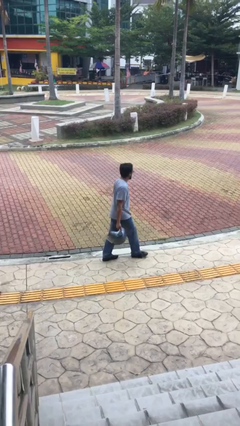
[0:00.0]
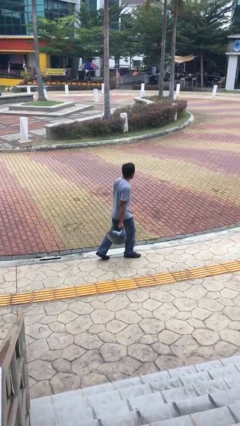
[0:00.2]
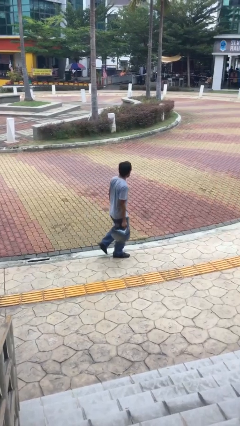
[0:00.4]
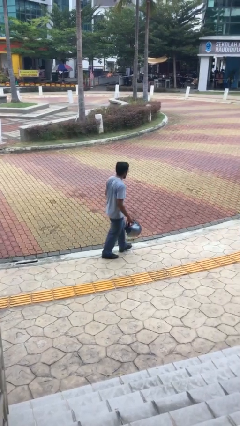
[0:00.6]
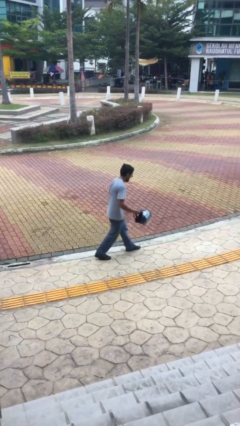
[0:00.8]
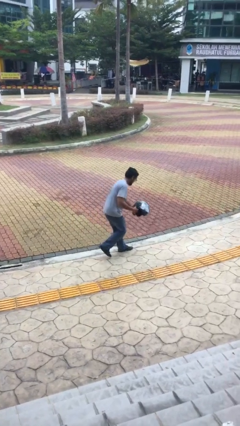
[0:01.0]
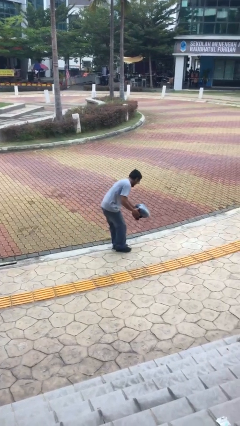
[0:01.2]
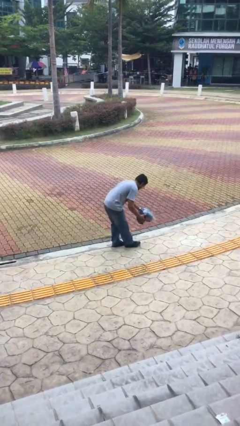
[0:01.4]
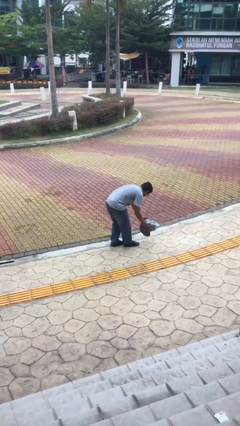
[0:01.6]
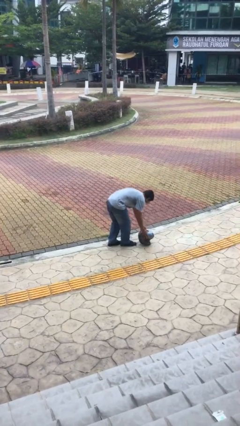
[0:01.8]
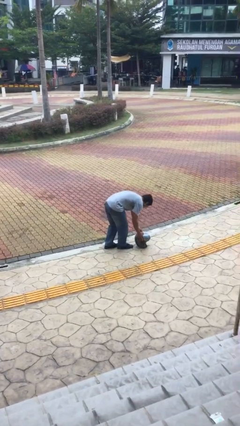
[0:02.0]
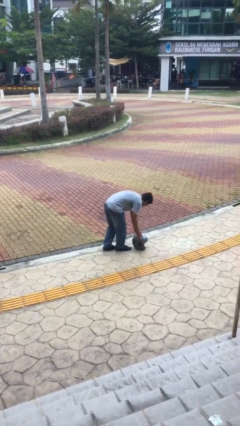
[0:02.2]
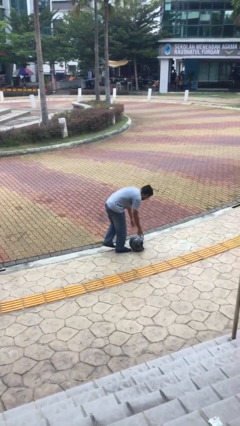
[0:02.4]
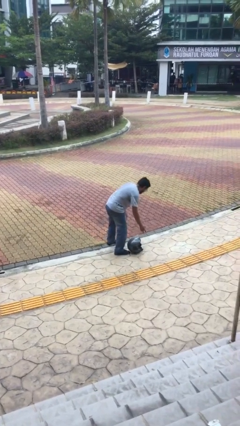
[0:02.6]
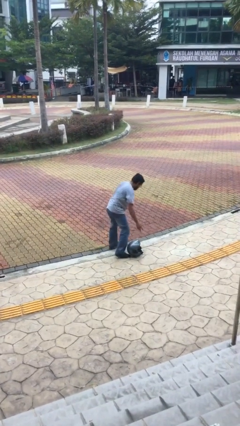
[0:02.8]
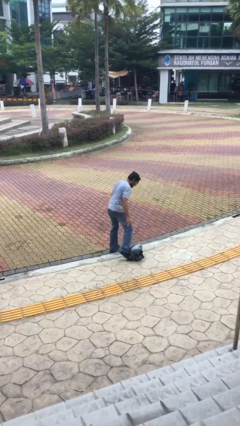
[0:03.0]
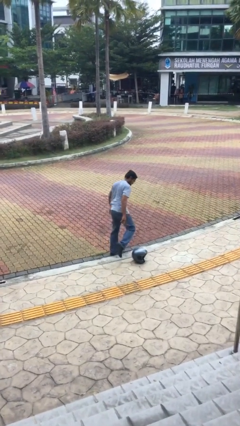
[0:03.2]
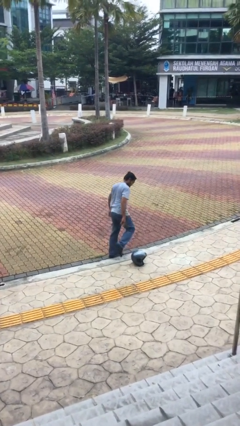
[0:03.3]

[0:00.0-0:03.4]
person puts down object on floor

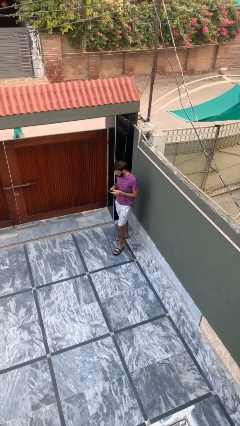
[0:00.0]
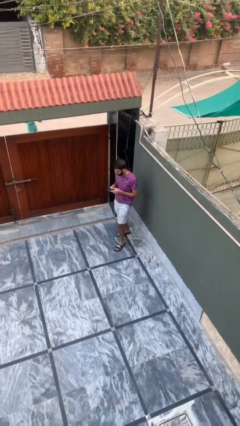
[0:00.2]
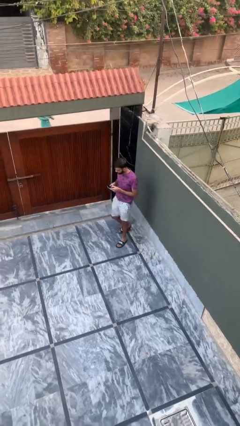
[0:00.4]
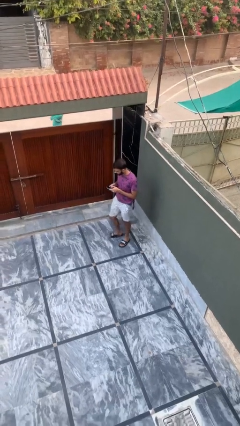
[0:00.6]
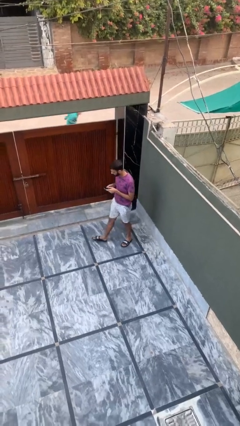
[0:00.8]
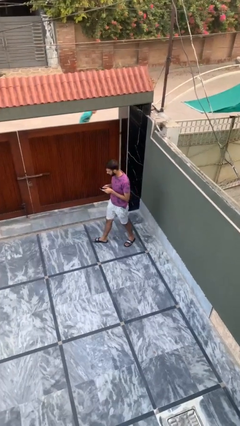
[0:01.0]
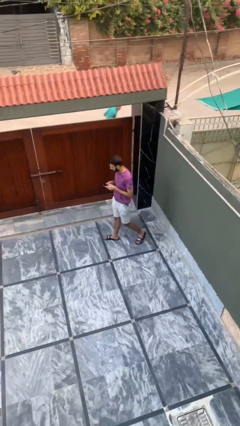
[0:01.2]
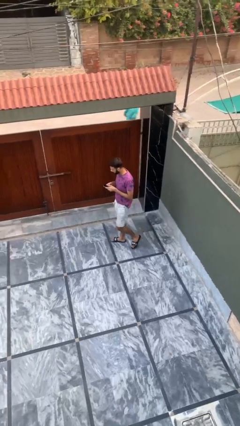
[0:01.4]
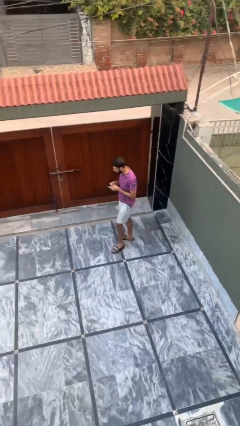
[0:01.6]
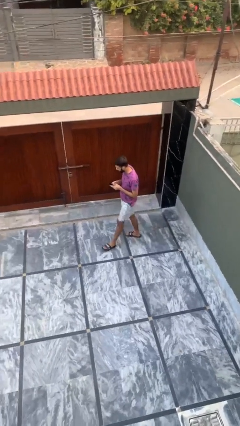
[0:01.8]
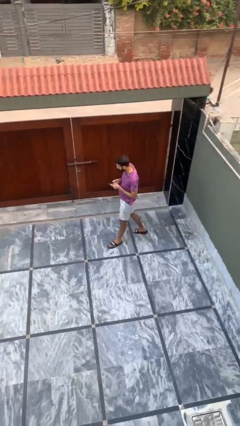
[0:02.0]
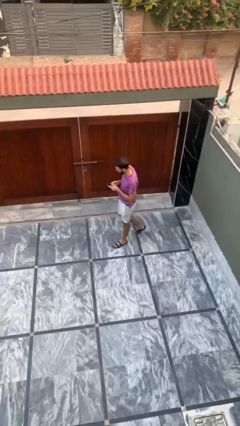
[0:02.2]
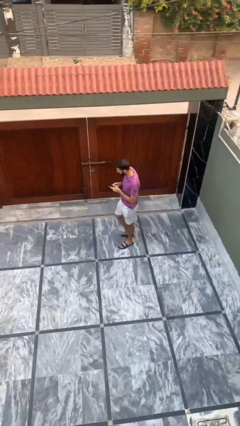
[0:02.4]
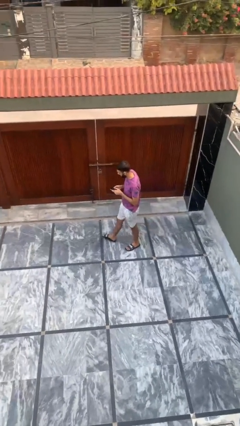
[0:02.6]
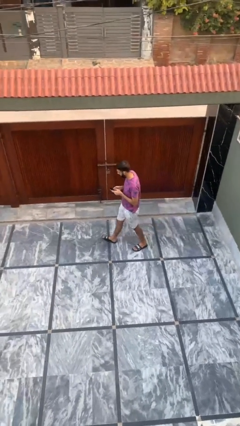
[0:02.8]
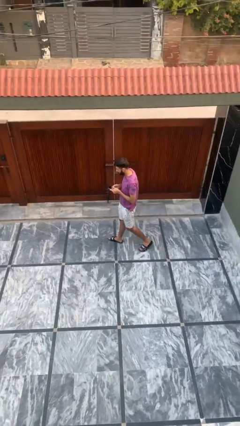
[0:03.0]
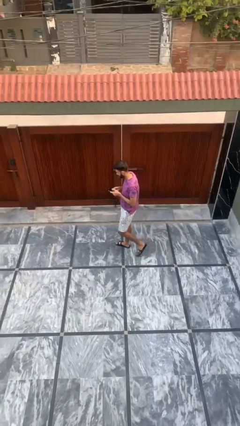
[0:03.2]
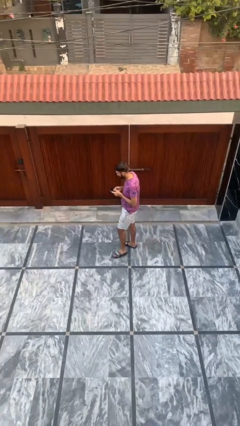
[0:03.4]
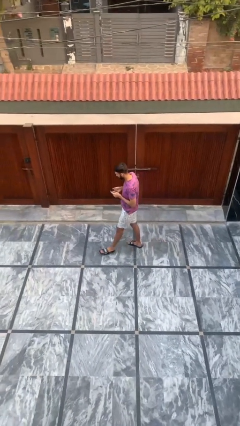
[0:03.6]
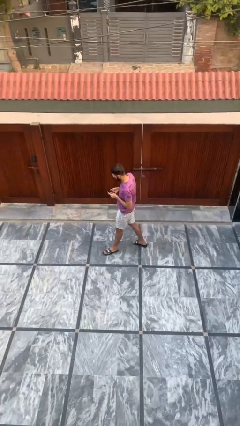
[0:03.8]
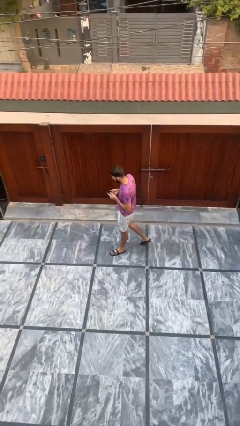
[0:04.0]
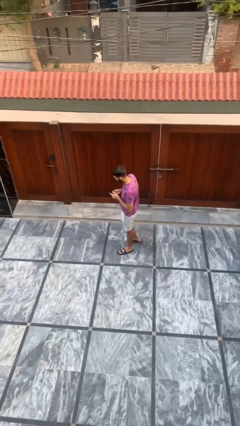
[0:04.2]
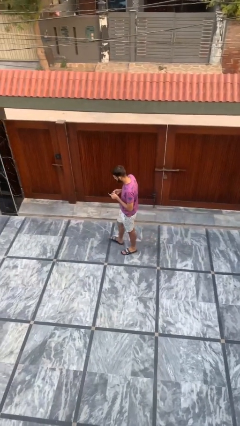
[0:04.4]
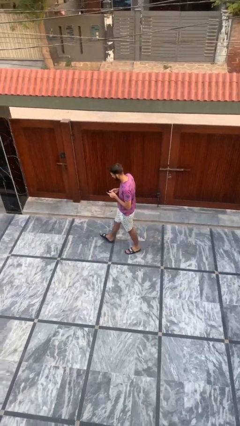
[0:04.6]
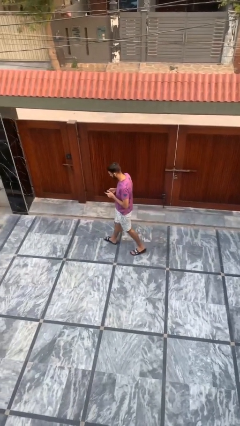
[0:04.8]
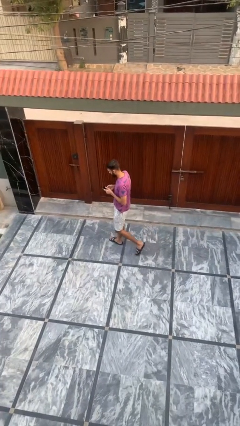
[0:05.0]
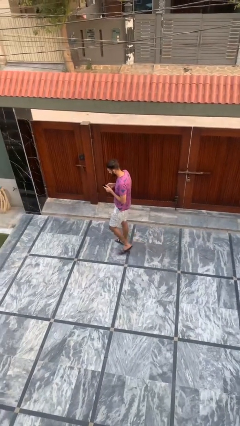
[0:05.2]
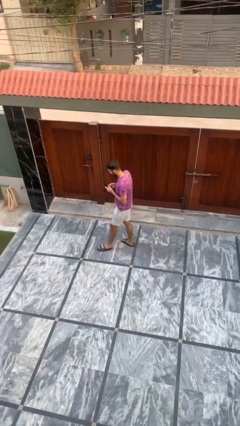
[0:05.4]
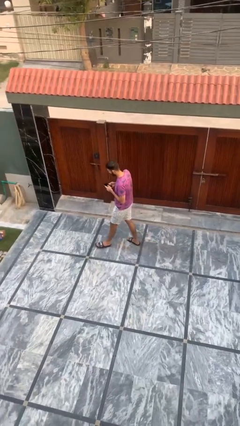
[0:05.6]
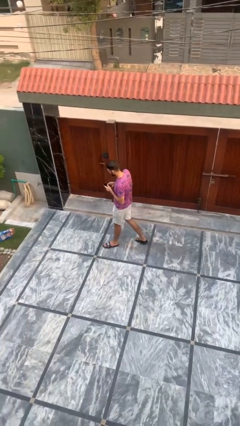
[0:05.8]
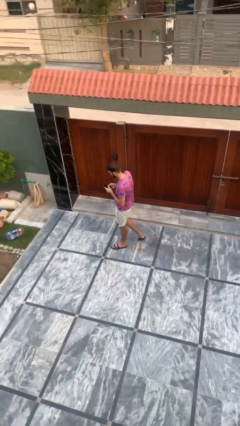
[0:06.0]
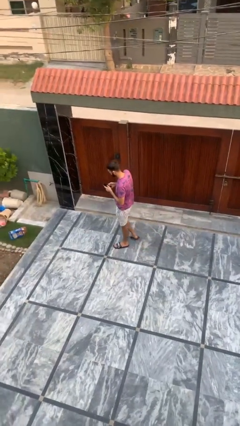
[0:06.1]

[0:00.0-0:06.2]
person texts on phone

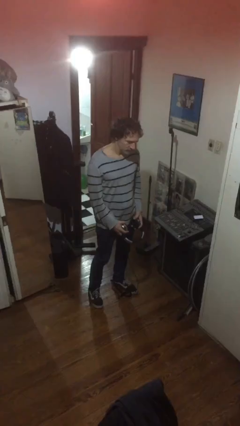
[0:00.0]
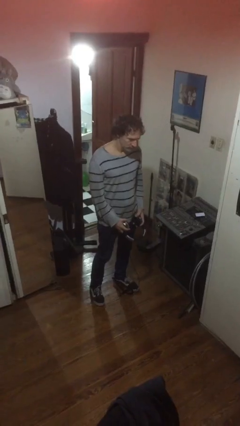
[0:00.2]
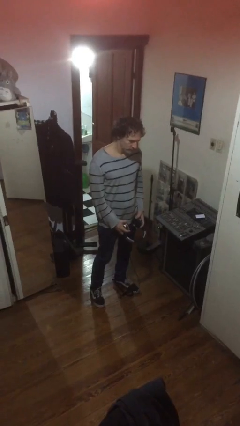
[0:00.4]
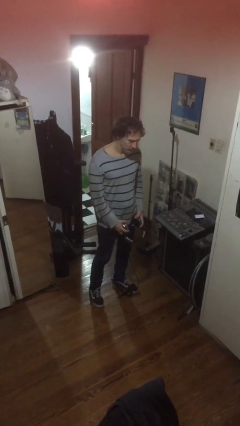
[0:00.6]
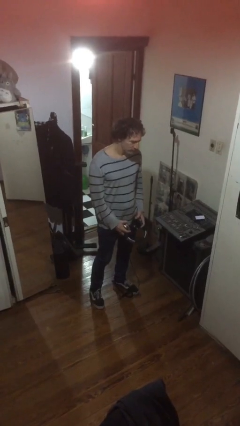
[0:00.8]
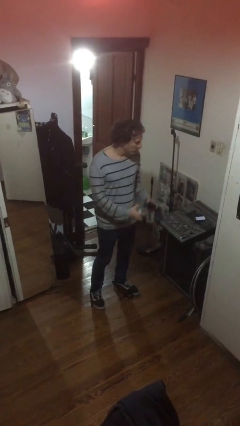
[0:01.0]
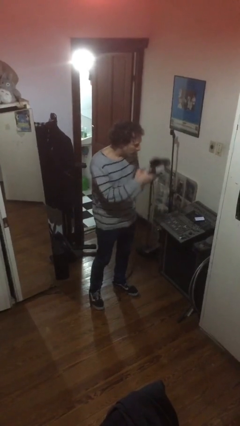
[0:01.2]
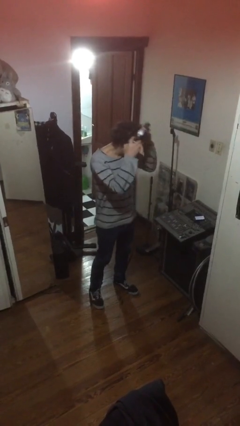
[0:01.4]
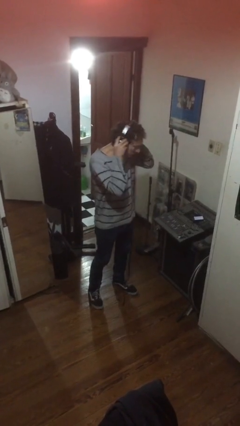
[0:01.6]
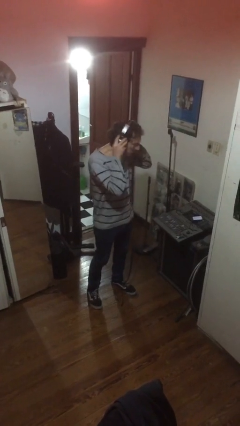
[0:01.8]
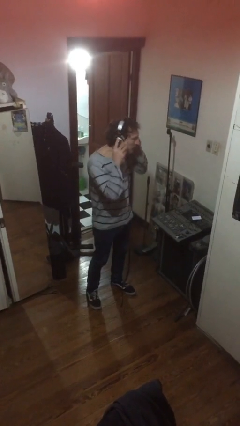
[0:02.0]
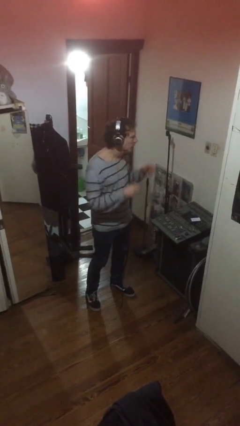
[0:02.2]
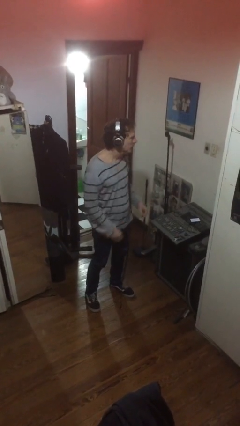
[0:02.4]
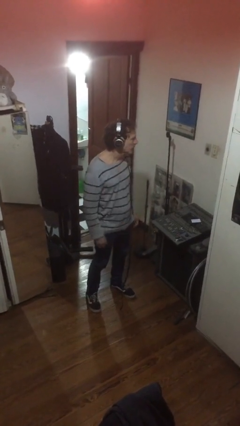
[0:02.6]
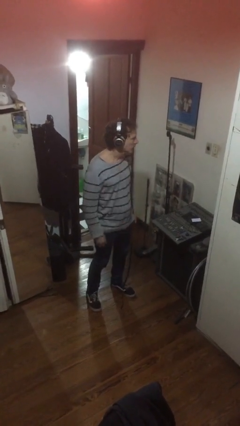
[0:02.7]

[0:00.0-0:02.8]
person puts on headphones

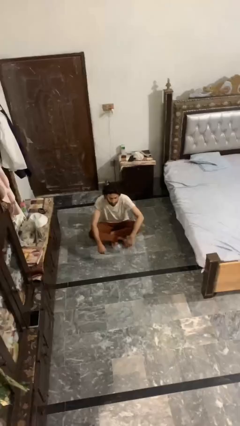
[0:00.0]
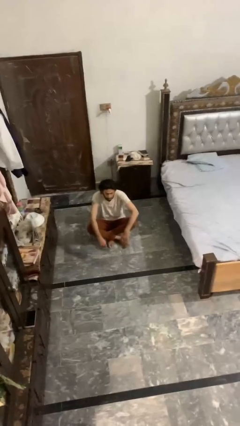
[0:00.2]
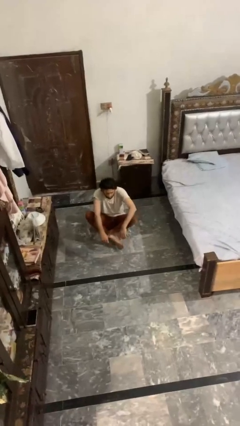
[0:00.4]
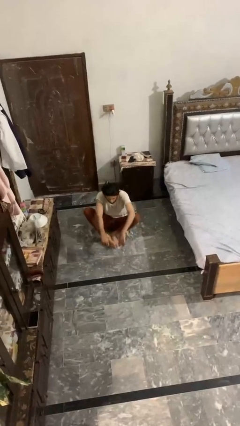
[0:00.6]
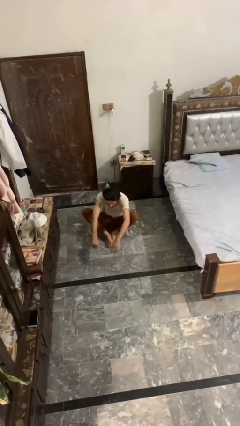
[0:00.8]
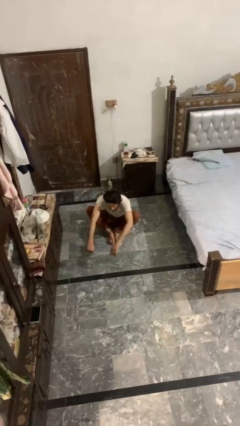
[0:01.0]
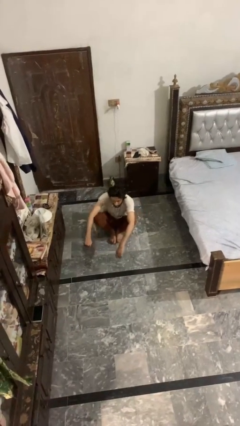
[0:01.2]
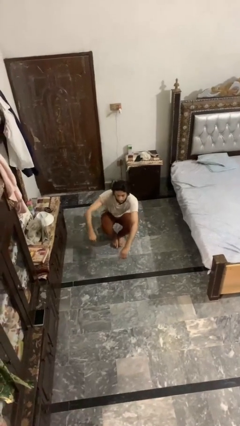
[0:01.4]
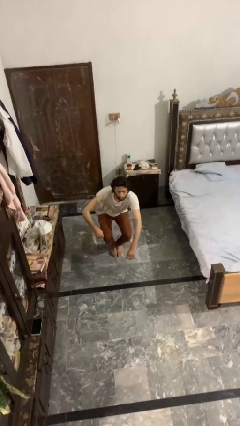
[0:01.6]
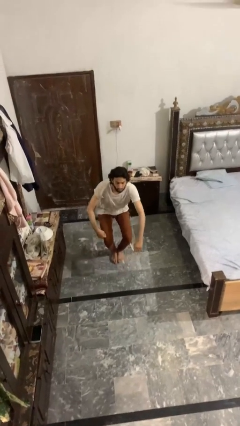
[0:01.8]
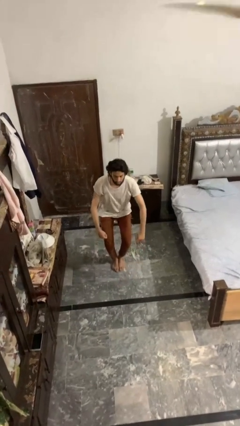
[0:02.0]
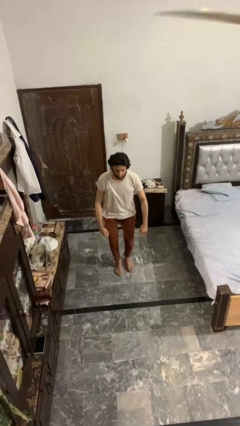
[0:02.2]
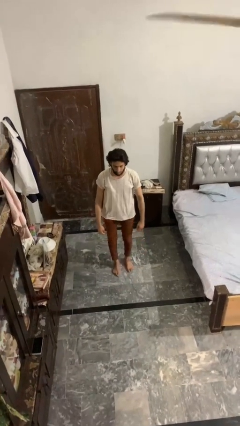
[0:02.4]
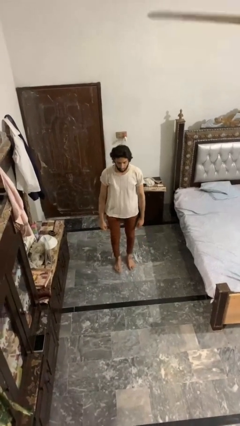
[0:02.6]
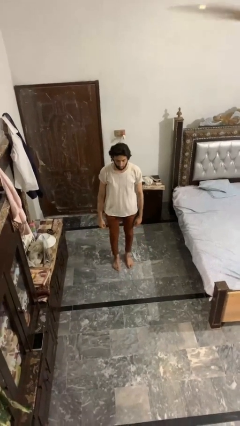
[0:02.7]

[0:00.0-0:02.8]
person stands up from floor

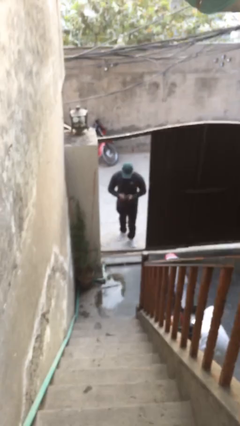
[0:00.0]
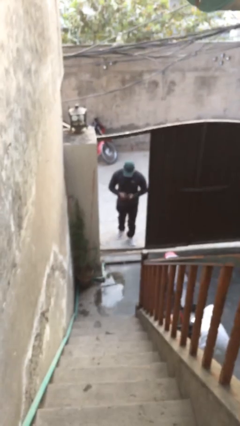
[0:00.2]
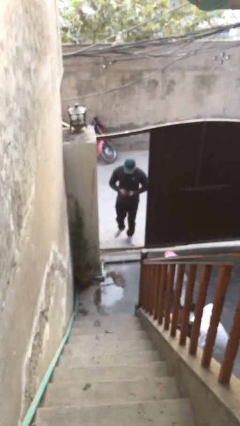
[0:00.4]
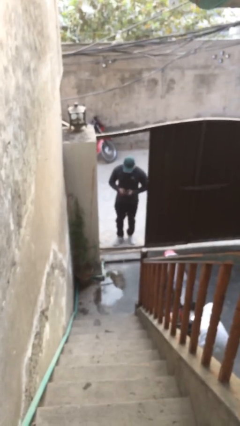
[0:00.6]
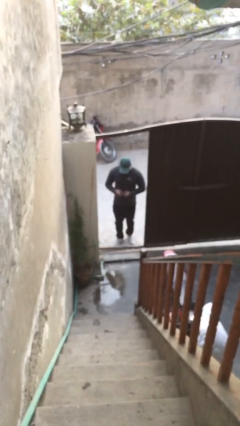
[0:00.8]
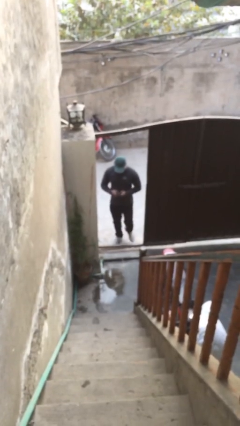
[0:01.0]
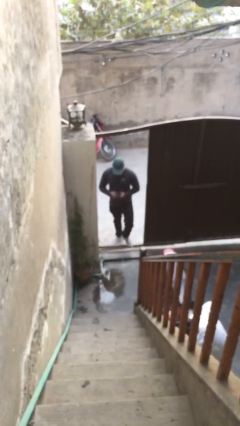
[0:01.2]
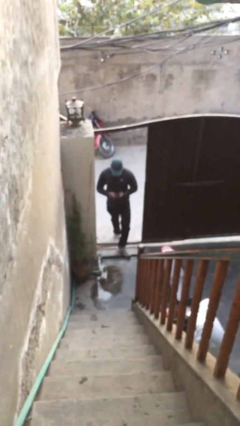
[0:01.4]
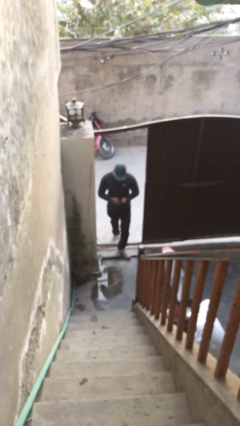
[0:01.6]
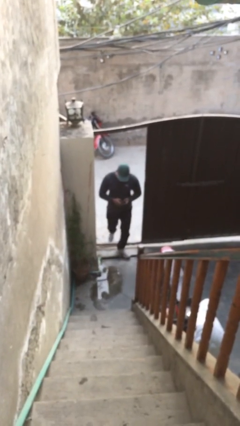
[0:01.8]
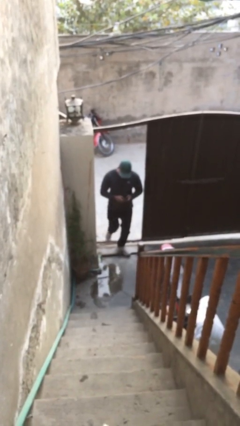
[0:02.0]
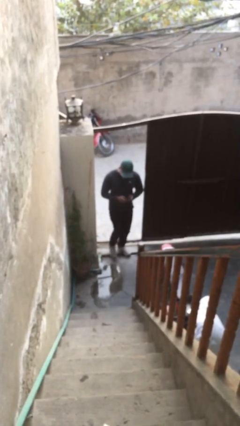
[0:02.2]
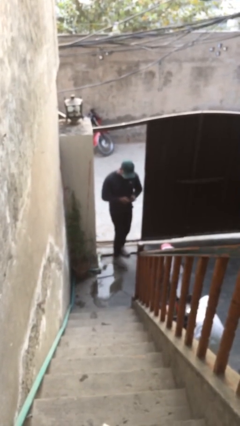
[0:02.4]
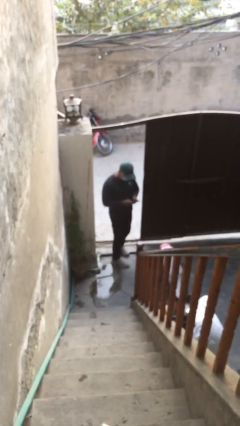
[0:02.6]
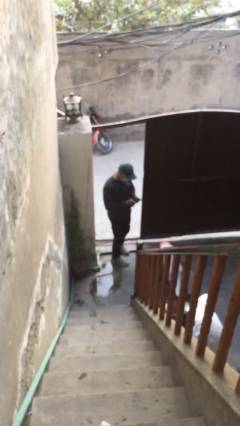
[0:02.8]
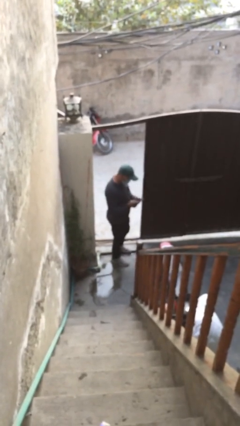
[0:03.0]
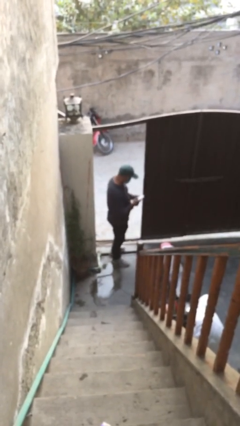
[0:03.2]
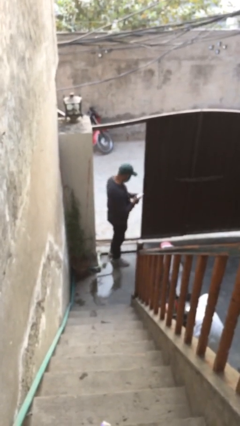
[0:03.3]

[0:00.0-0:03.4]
person enters scene through structure
